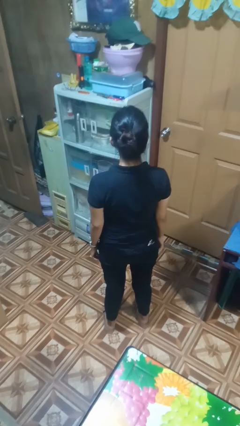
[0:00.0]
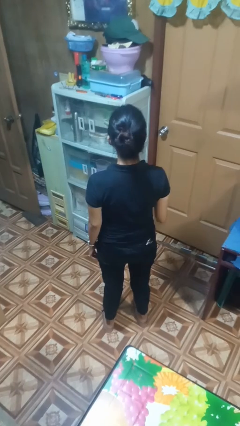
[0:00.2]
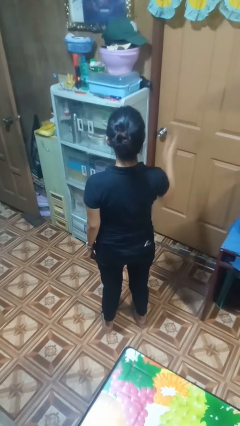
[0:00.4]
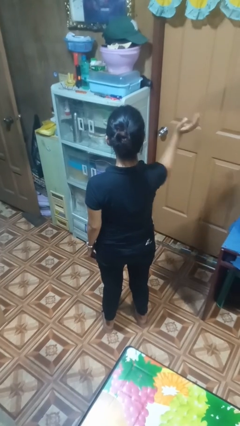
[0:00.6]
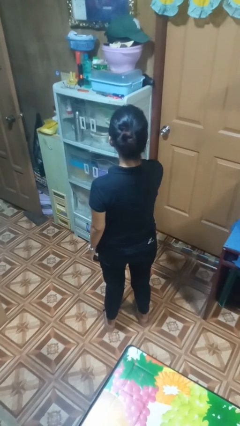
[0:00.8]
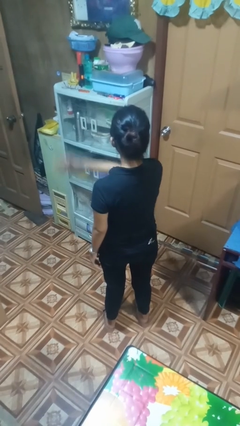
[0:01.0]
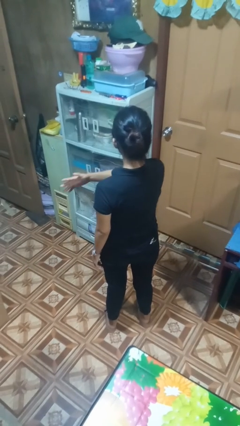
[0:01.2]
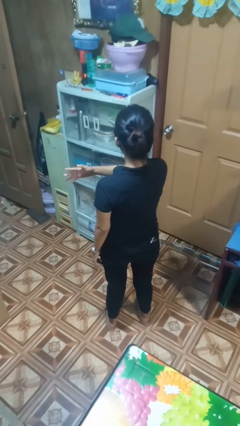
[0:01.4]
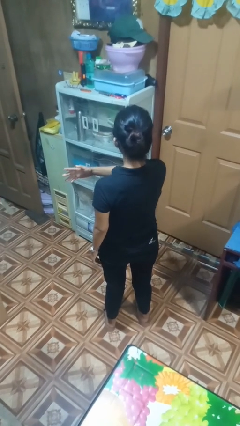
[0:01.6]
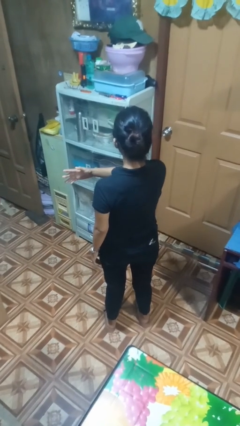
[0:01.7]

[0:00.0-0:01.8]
person gestures swipe left

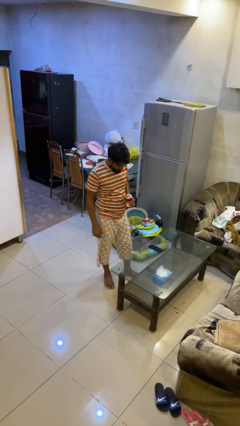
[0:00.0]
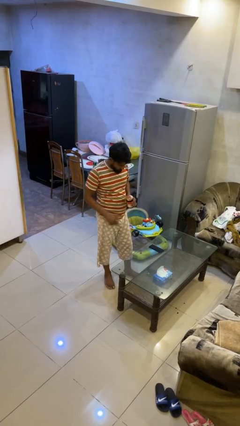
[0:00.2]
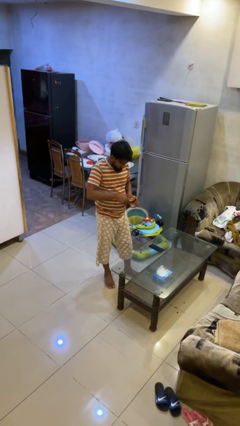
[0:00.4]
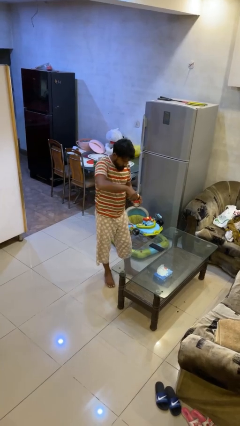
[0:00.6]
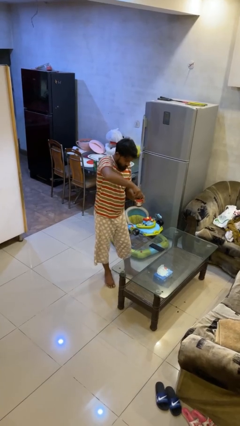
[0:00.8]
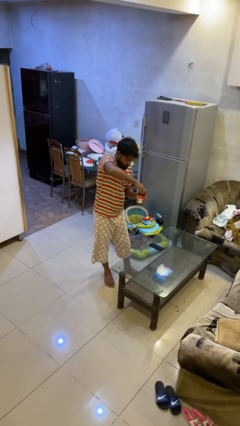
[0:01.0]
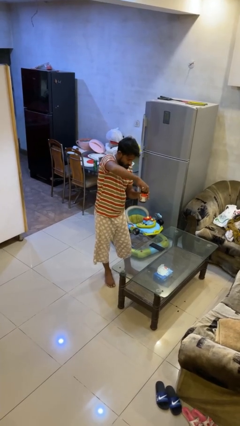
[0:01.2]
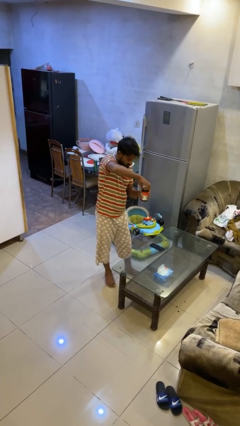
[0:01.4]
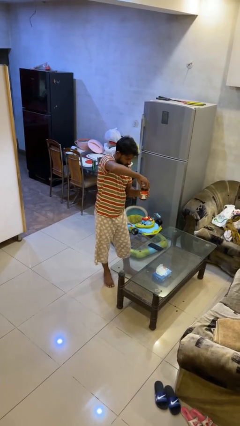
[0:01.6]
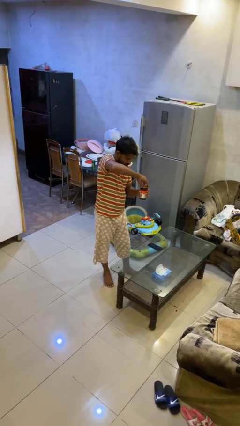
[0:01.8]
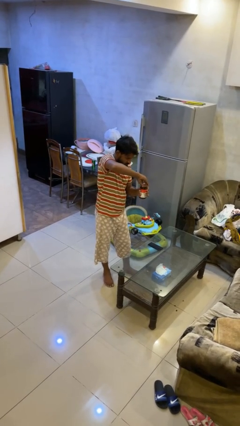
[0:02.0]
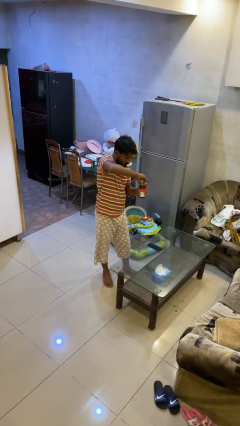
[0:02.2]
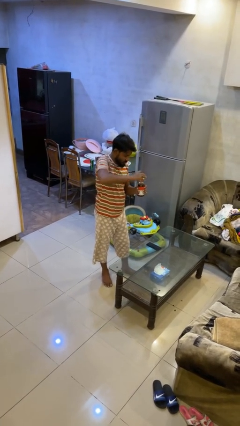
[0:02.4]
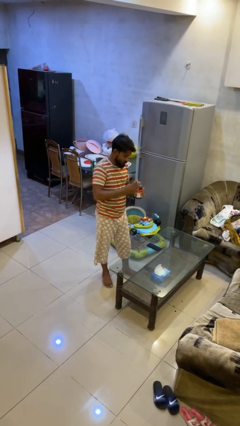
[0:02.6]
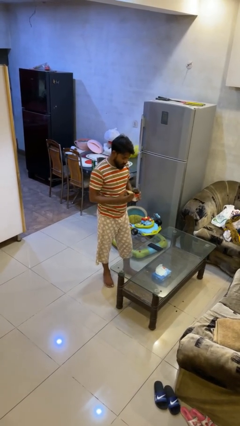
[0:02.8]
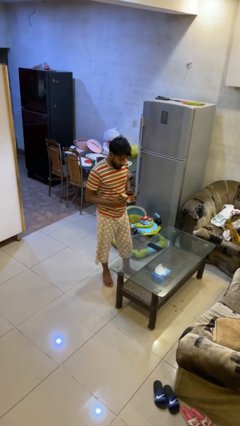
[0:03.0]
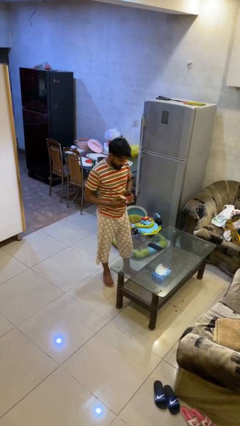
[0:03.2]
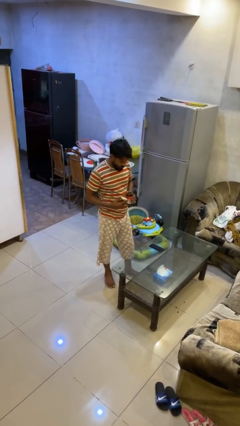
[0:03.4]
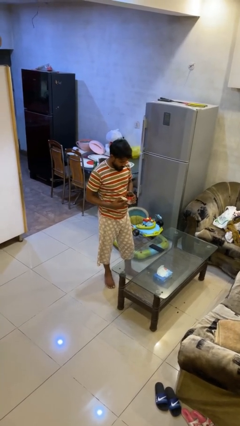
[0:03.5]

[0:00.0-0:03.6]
person opens jar

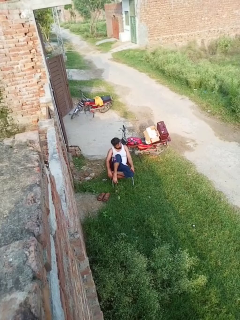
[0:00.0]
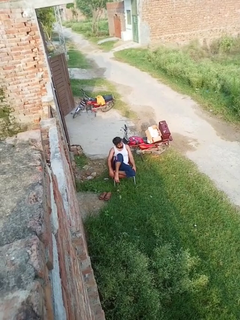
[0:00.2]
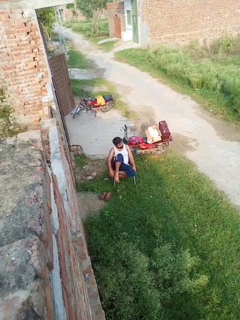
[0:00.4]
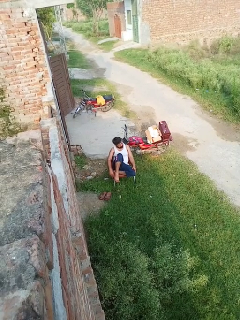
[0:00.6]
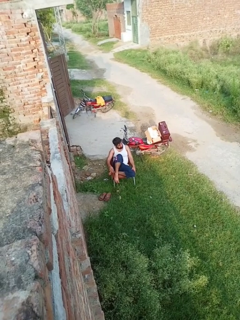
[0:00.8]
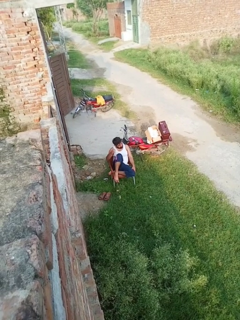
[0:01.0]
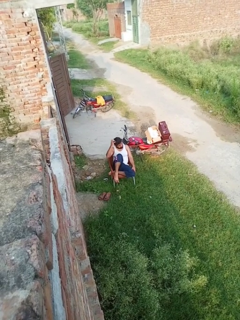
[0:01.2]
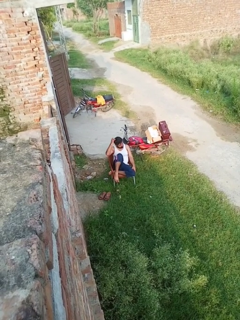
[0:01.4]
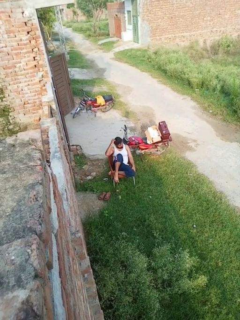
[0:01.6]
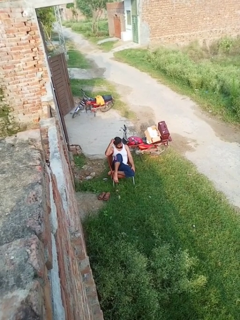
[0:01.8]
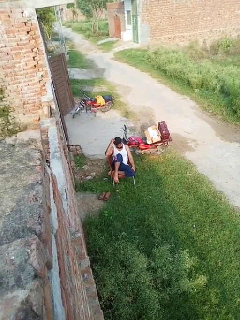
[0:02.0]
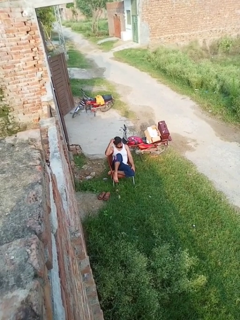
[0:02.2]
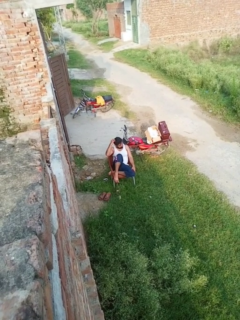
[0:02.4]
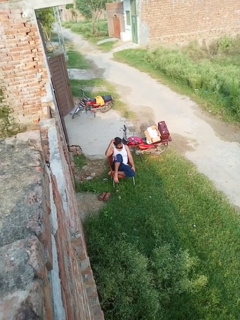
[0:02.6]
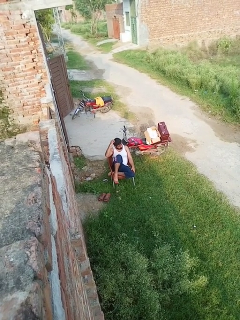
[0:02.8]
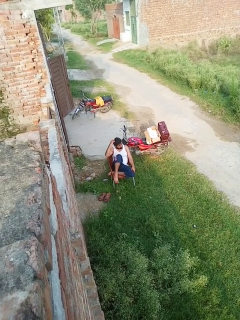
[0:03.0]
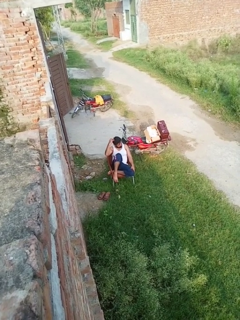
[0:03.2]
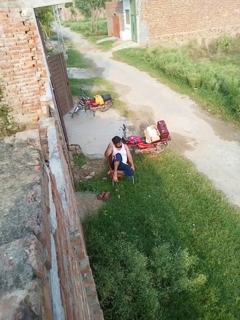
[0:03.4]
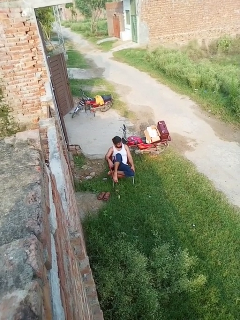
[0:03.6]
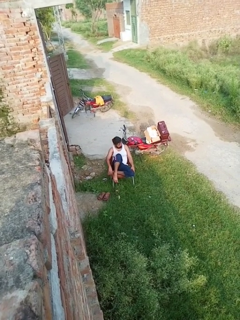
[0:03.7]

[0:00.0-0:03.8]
person scratches face

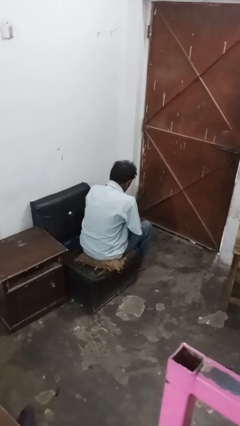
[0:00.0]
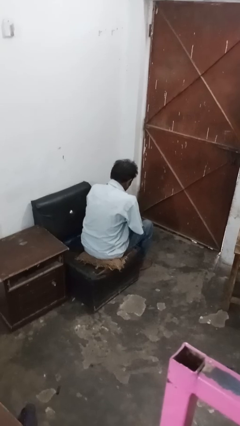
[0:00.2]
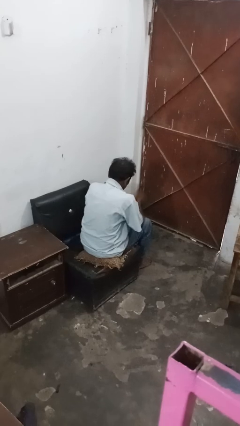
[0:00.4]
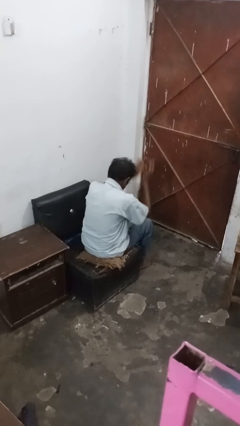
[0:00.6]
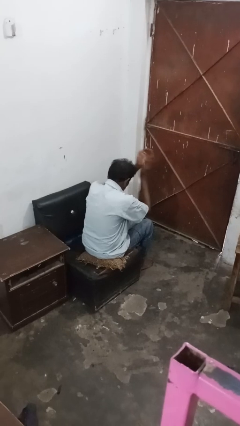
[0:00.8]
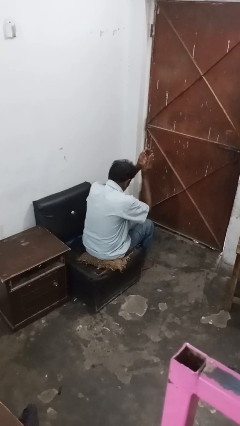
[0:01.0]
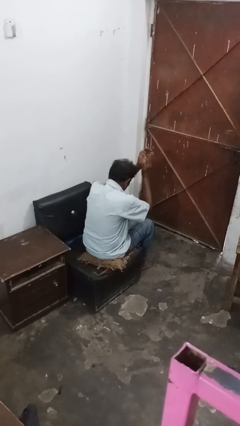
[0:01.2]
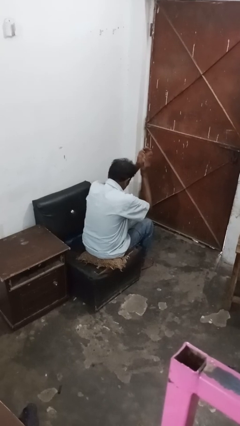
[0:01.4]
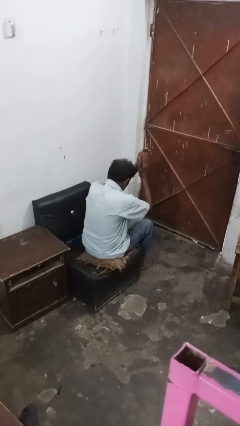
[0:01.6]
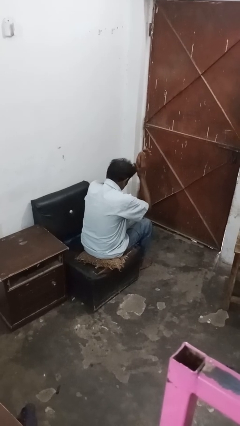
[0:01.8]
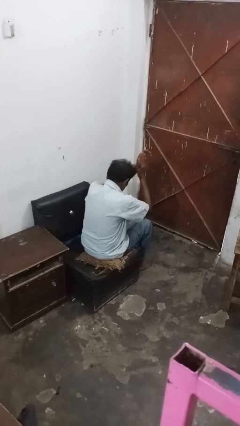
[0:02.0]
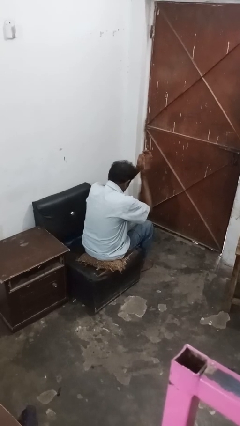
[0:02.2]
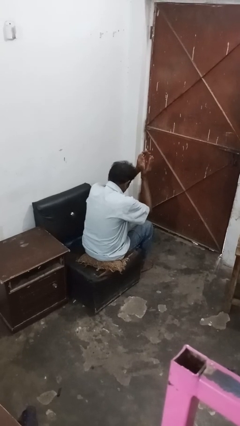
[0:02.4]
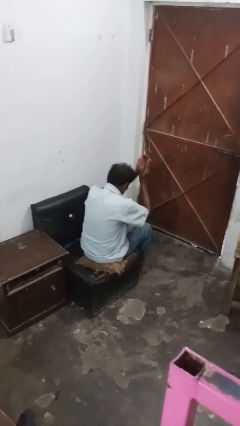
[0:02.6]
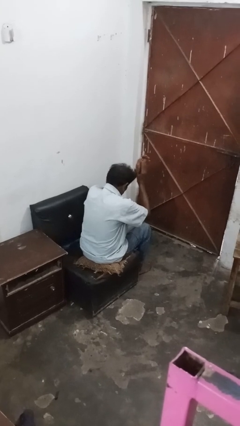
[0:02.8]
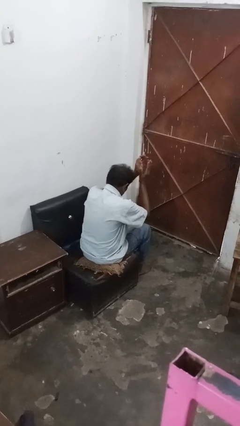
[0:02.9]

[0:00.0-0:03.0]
person claps hands

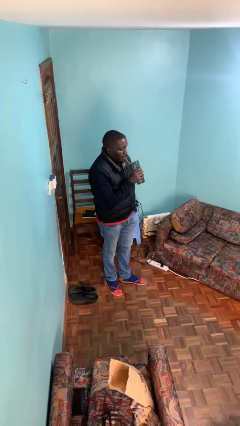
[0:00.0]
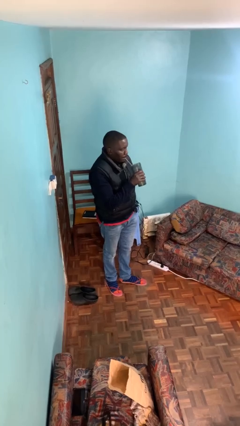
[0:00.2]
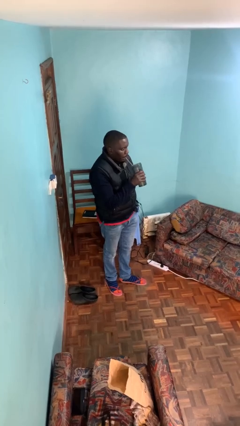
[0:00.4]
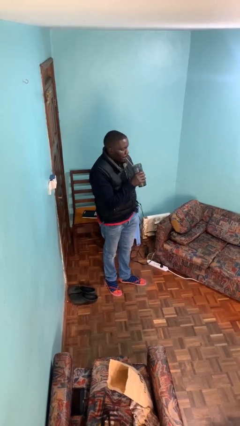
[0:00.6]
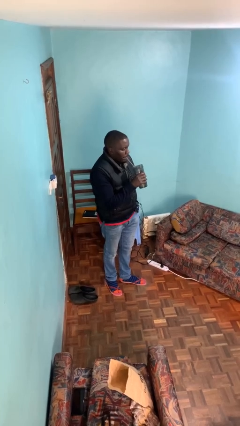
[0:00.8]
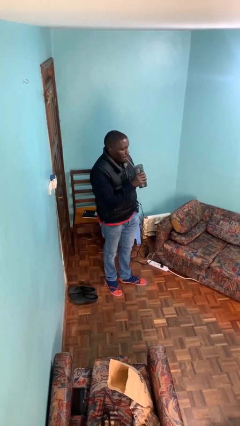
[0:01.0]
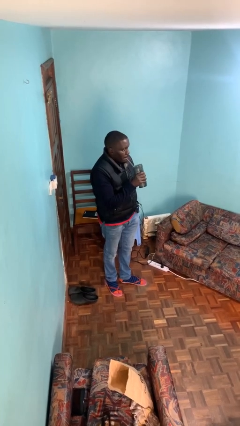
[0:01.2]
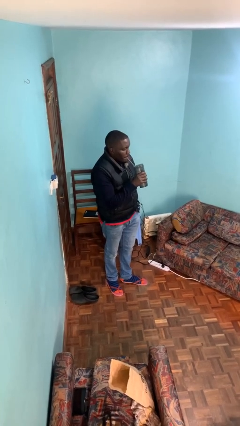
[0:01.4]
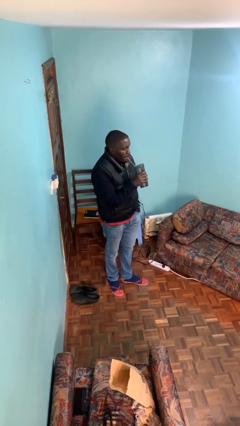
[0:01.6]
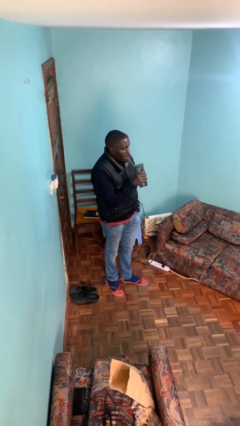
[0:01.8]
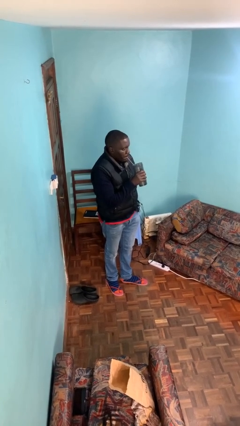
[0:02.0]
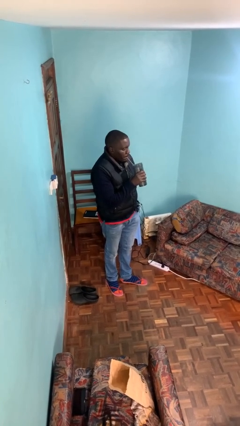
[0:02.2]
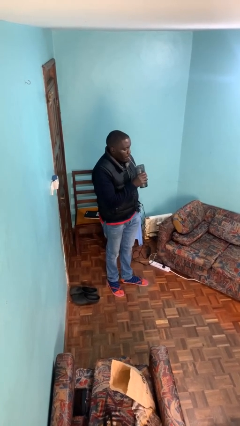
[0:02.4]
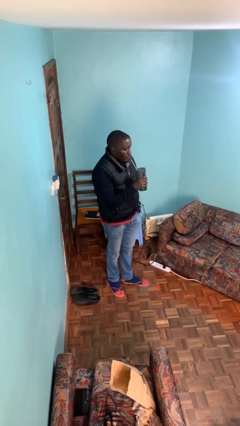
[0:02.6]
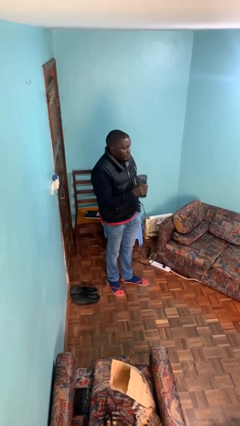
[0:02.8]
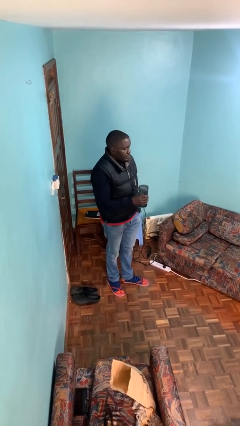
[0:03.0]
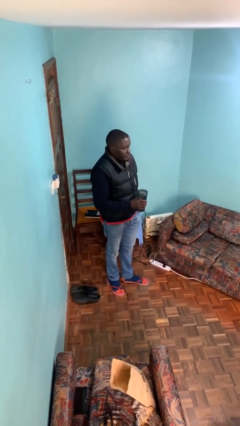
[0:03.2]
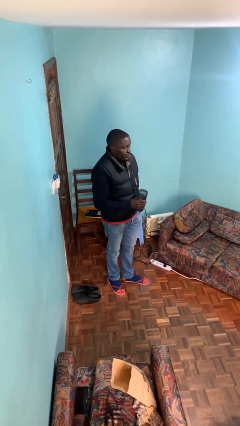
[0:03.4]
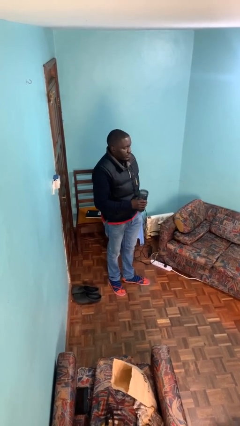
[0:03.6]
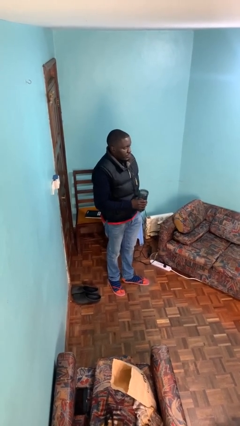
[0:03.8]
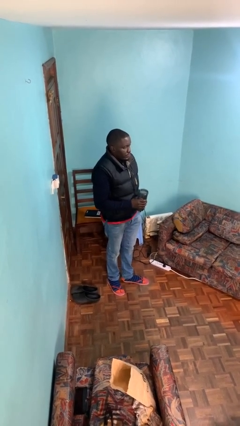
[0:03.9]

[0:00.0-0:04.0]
person drinks from straw

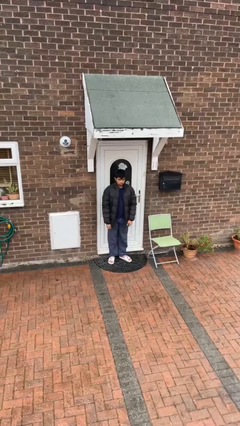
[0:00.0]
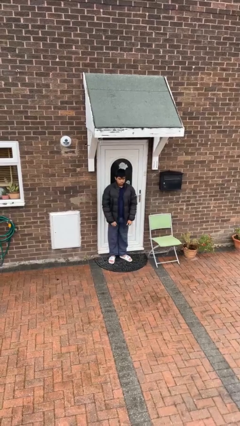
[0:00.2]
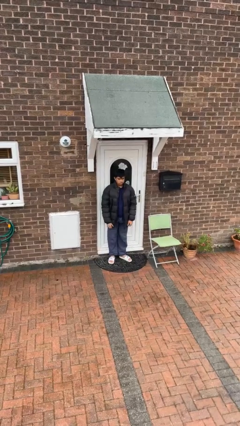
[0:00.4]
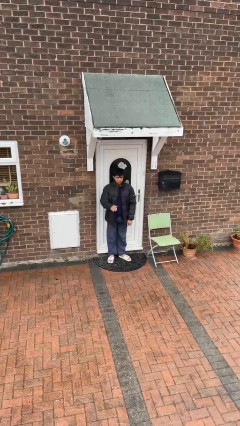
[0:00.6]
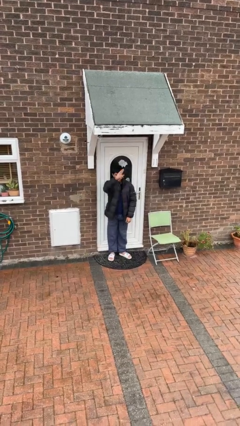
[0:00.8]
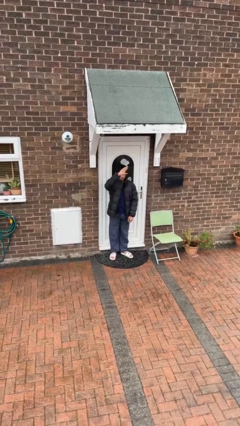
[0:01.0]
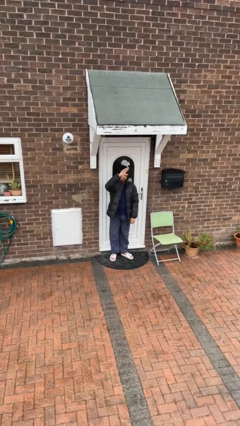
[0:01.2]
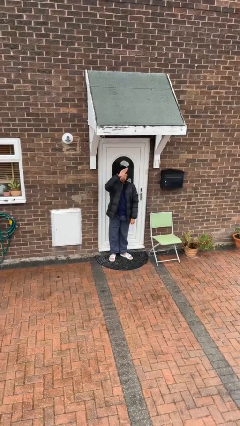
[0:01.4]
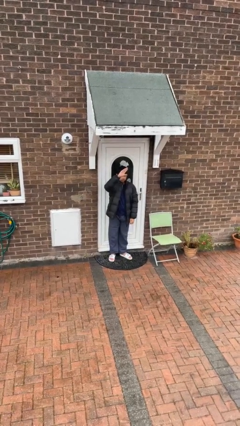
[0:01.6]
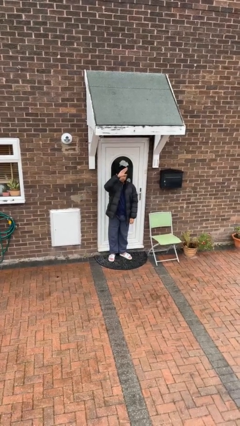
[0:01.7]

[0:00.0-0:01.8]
person gestures raise hand

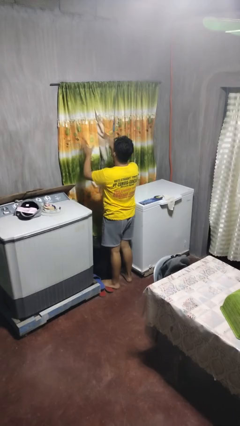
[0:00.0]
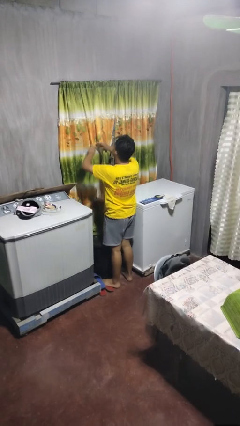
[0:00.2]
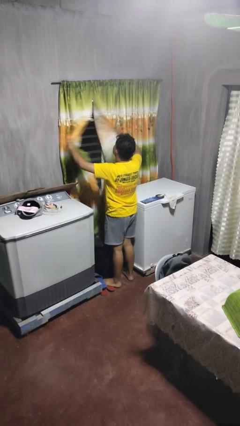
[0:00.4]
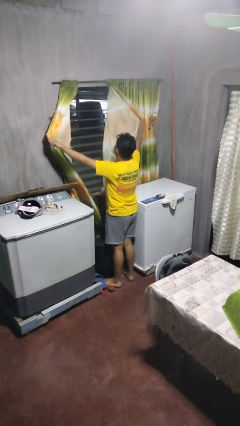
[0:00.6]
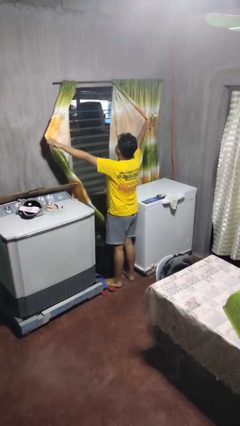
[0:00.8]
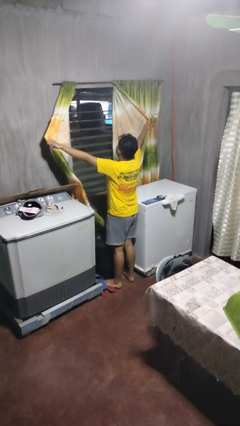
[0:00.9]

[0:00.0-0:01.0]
person opens curtains
